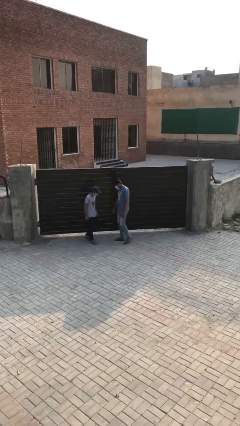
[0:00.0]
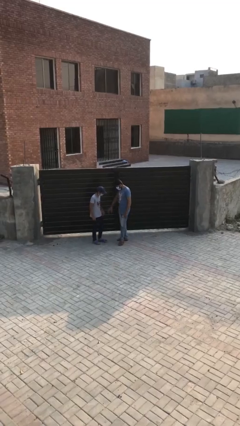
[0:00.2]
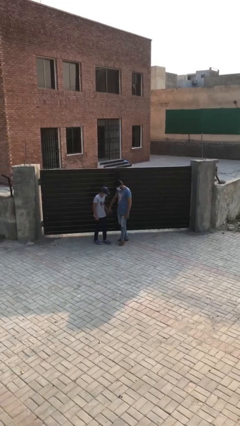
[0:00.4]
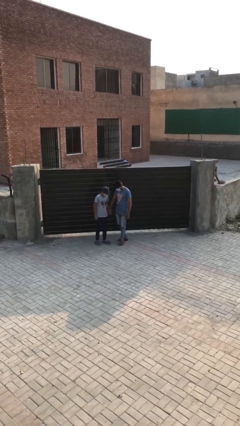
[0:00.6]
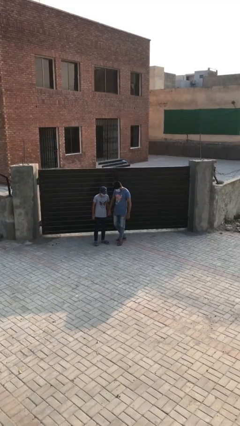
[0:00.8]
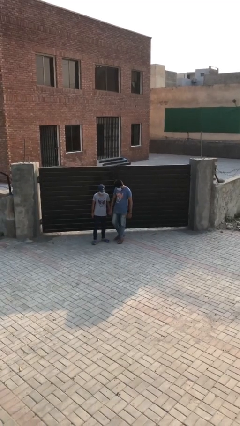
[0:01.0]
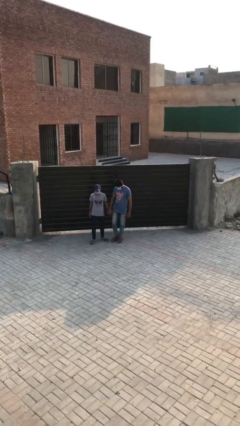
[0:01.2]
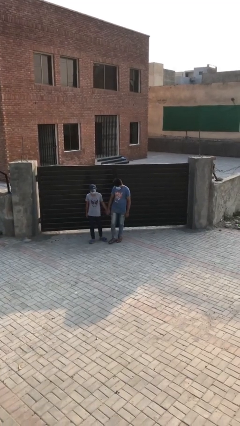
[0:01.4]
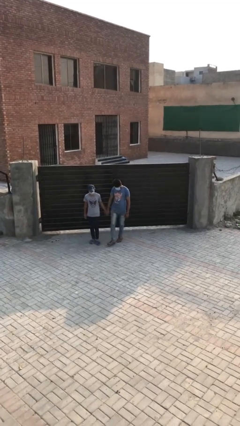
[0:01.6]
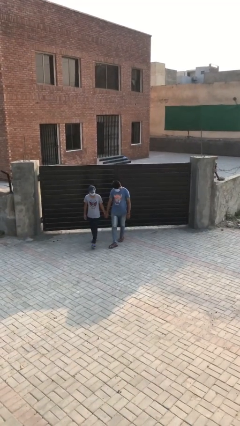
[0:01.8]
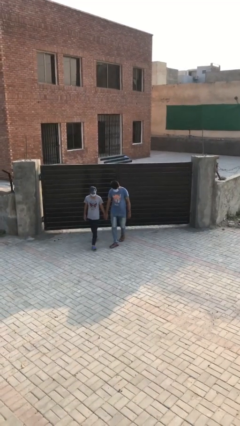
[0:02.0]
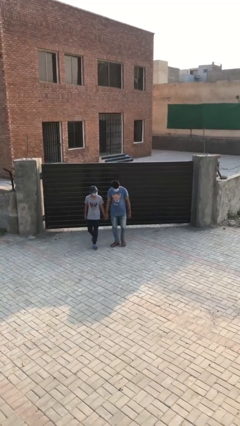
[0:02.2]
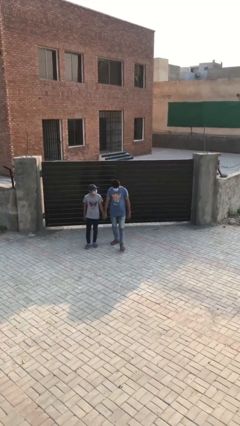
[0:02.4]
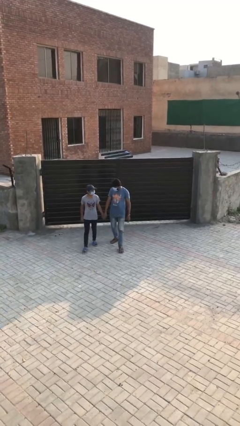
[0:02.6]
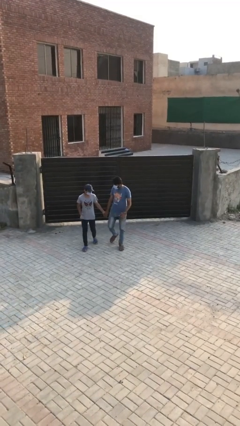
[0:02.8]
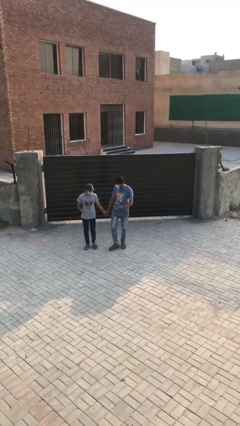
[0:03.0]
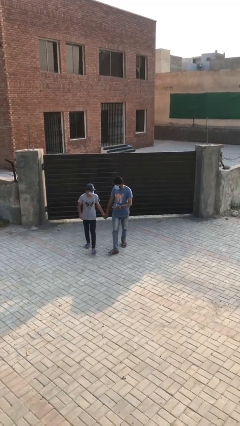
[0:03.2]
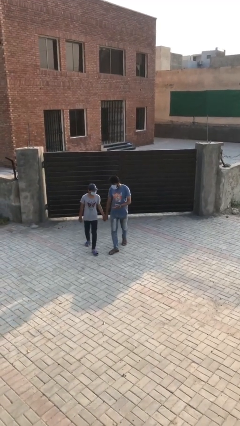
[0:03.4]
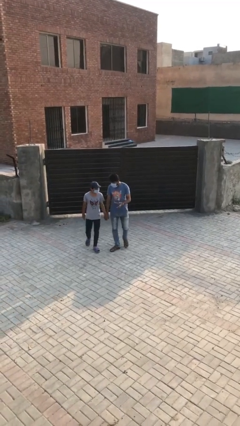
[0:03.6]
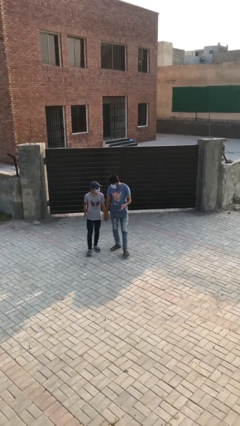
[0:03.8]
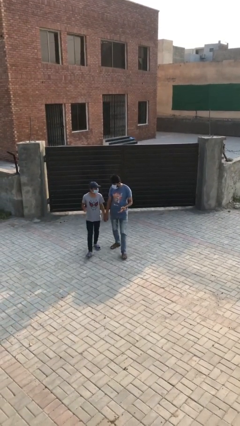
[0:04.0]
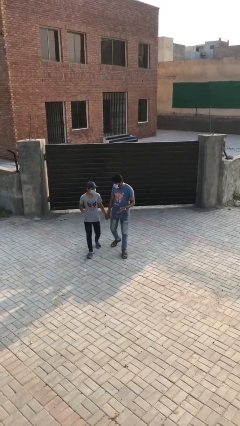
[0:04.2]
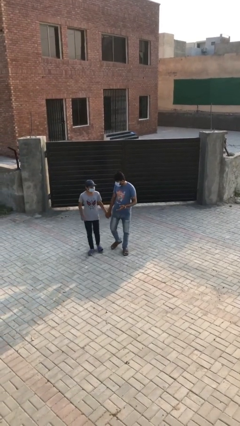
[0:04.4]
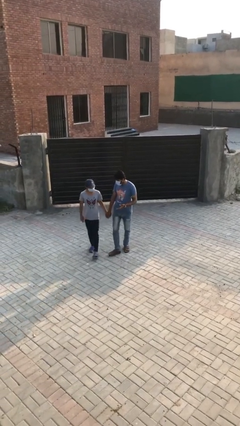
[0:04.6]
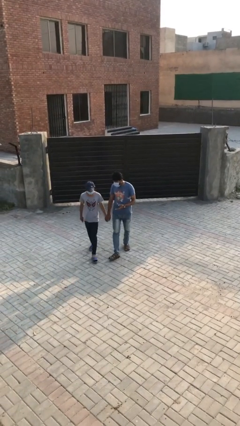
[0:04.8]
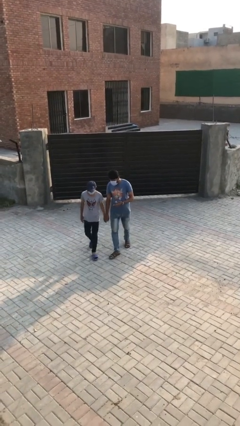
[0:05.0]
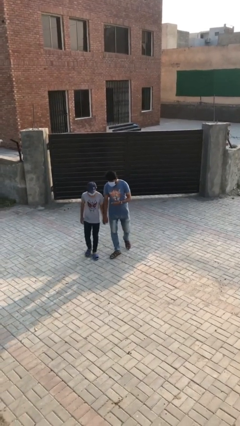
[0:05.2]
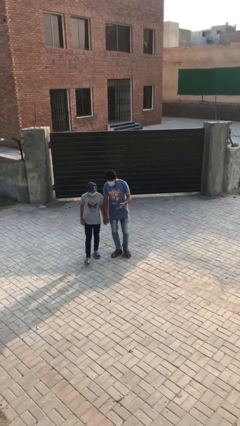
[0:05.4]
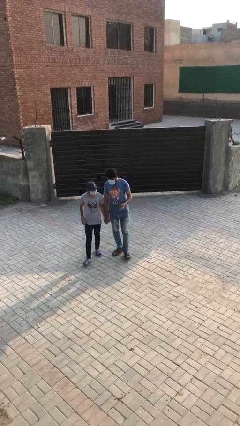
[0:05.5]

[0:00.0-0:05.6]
person holds hand

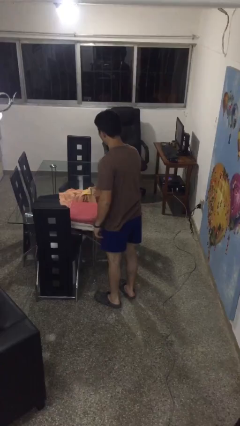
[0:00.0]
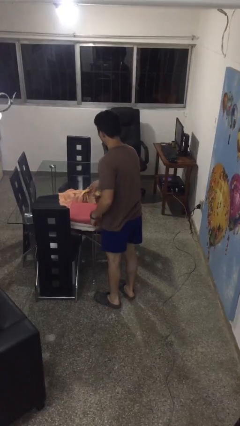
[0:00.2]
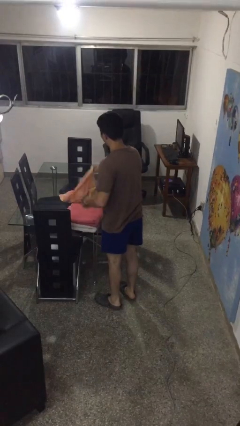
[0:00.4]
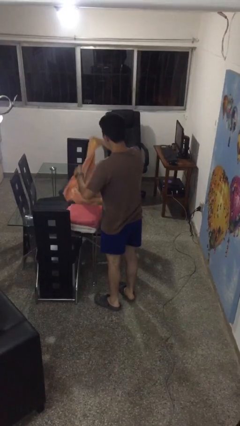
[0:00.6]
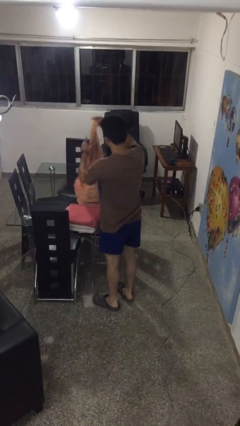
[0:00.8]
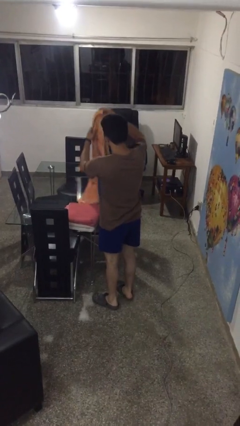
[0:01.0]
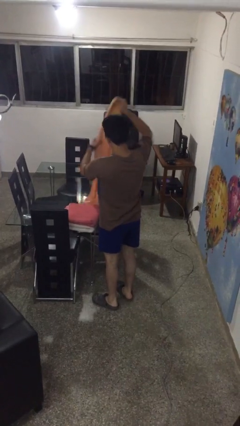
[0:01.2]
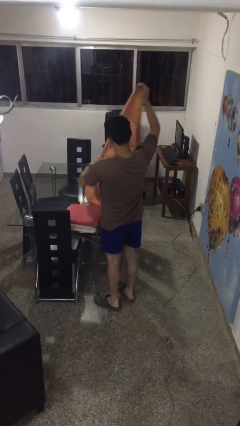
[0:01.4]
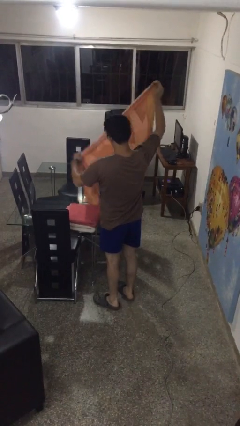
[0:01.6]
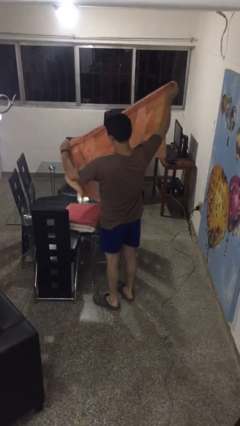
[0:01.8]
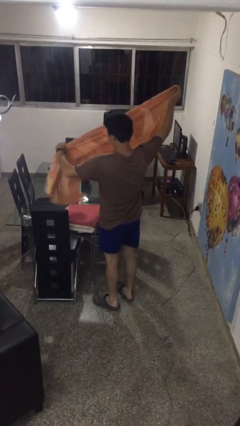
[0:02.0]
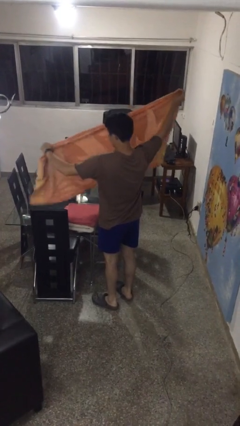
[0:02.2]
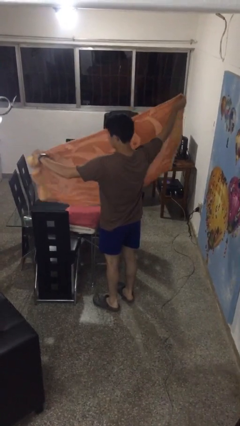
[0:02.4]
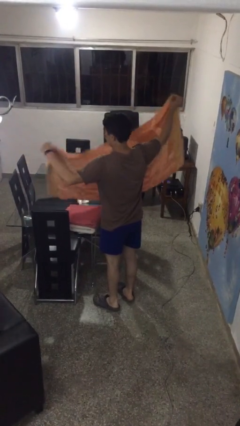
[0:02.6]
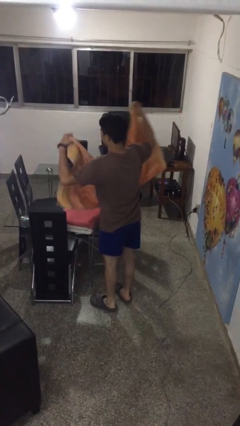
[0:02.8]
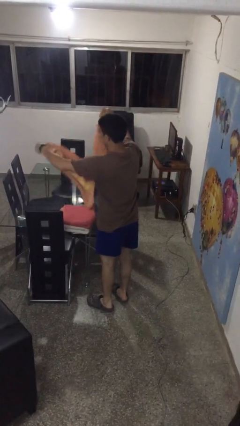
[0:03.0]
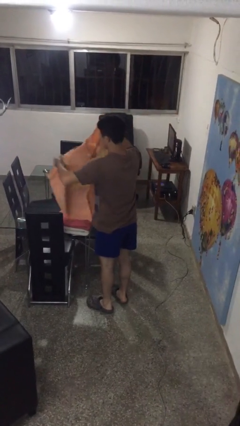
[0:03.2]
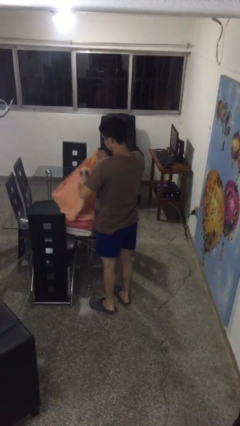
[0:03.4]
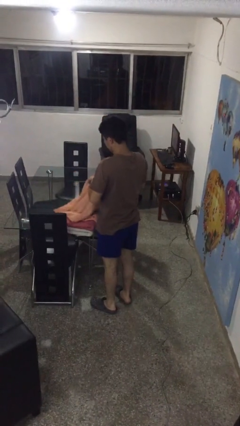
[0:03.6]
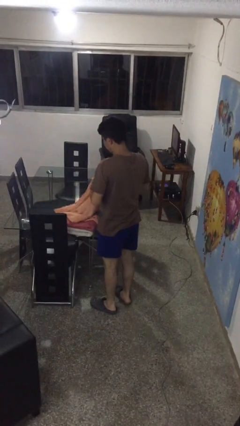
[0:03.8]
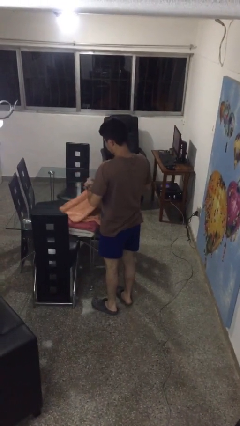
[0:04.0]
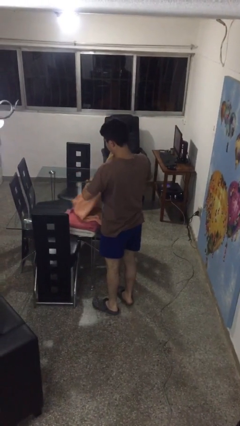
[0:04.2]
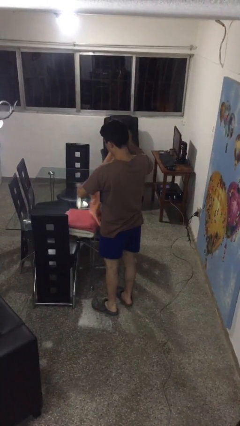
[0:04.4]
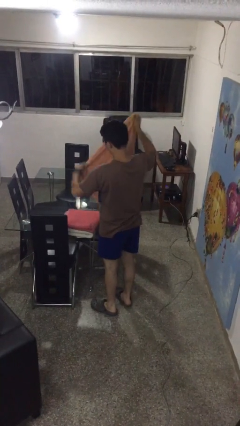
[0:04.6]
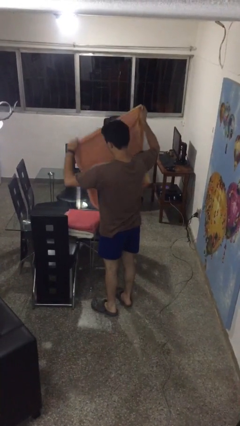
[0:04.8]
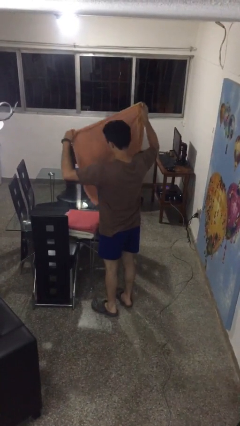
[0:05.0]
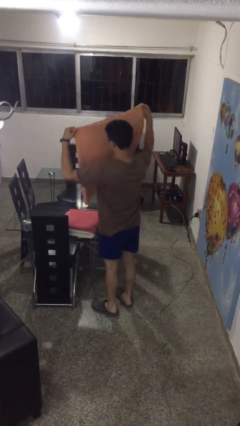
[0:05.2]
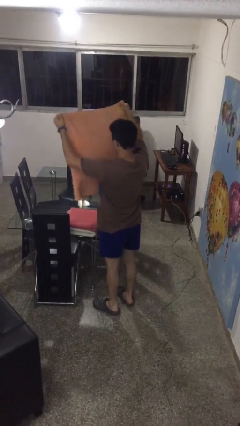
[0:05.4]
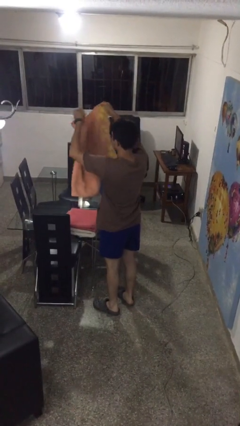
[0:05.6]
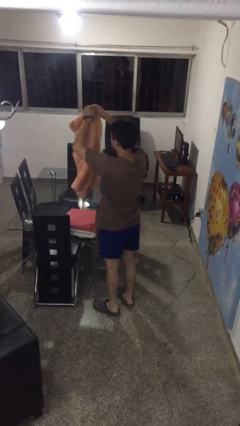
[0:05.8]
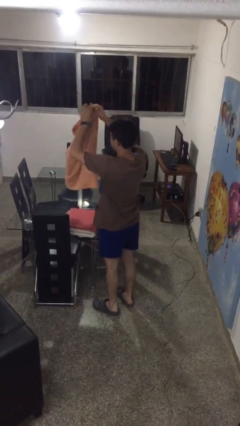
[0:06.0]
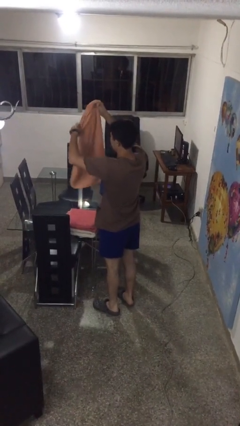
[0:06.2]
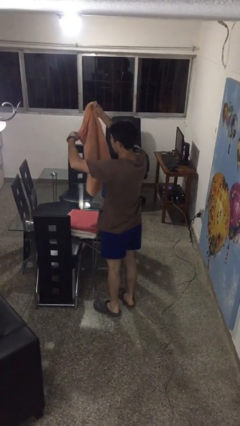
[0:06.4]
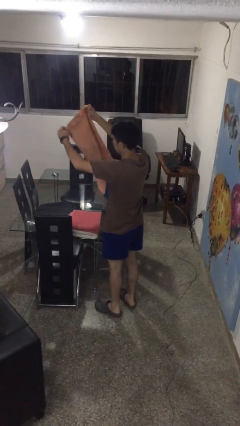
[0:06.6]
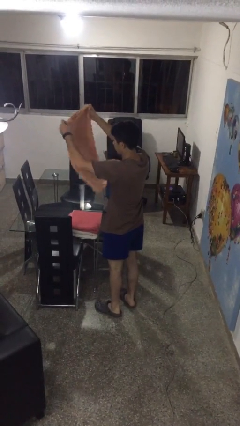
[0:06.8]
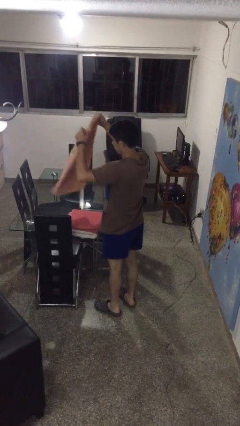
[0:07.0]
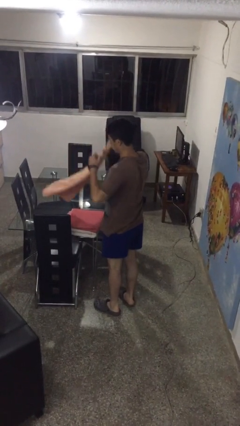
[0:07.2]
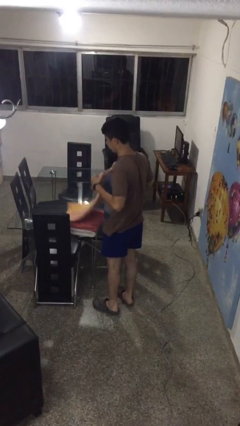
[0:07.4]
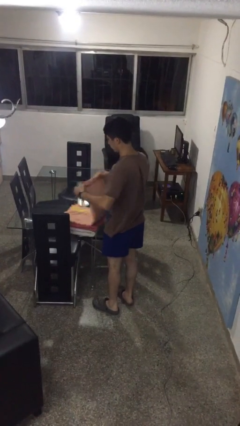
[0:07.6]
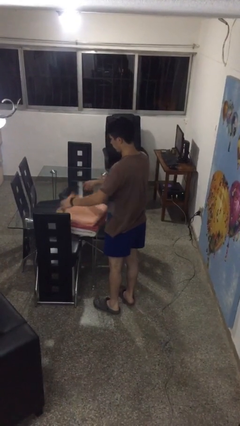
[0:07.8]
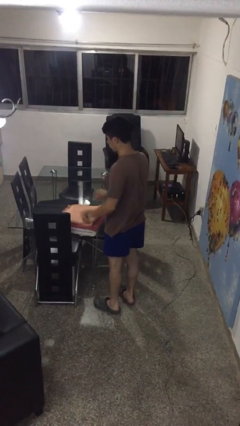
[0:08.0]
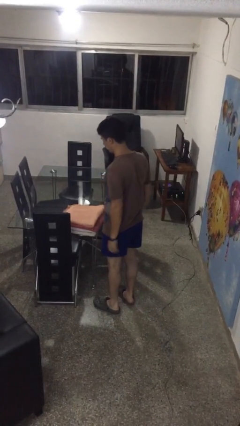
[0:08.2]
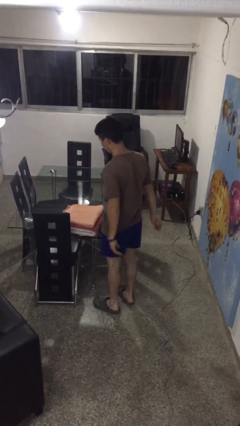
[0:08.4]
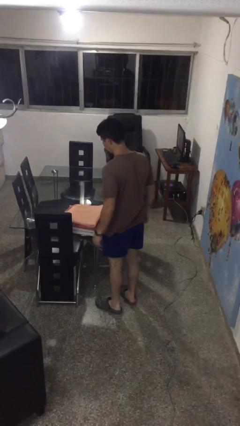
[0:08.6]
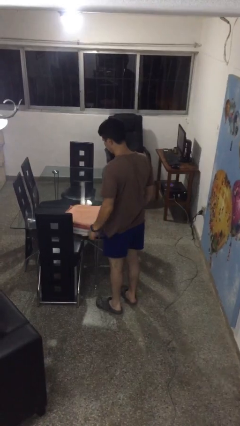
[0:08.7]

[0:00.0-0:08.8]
person folds towel

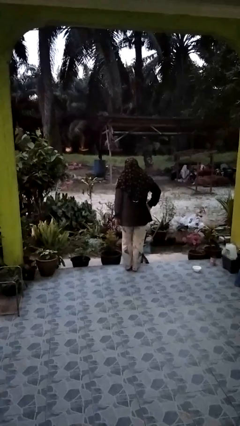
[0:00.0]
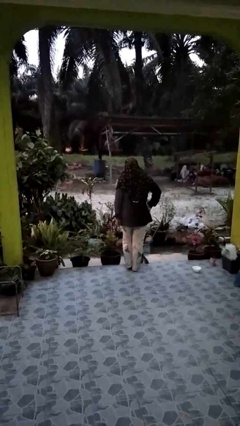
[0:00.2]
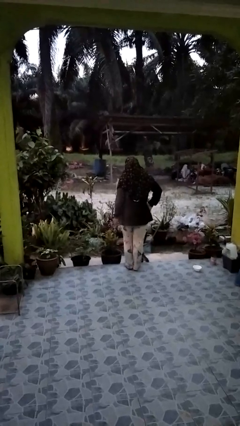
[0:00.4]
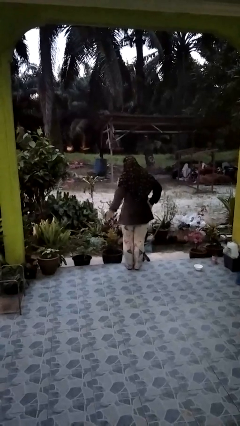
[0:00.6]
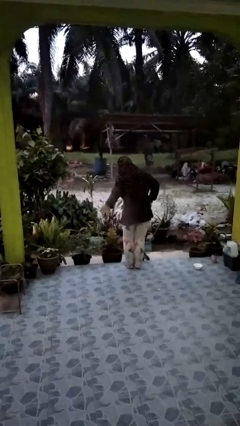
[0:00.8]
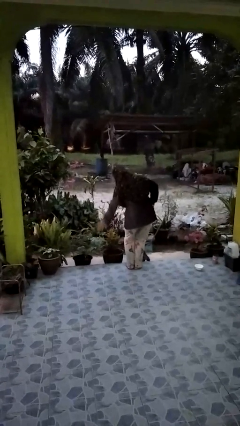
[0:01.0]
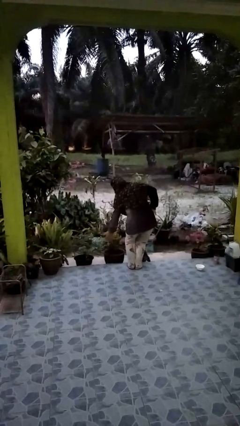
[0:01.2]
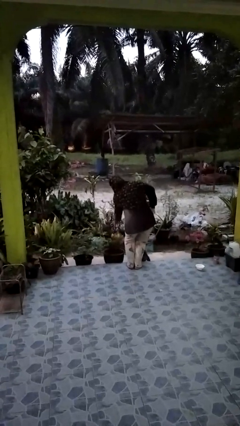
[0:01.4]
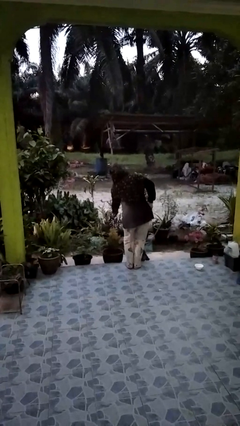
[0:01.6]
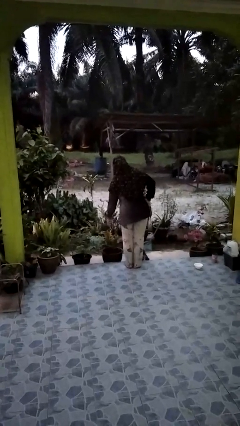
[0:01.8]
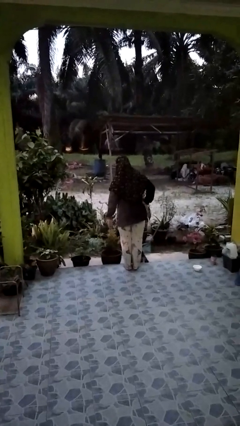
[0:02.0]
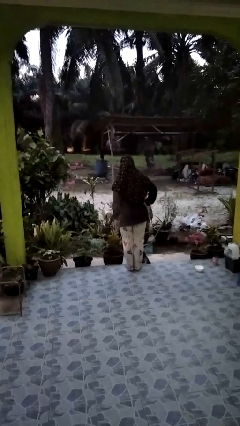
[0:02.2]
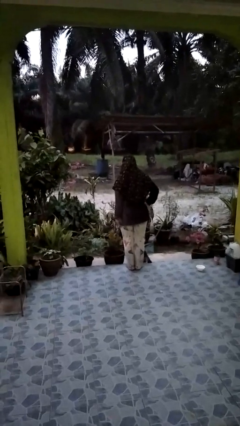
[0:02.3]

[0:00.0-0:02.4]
person waves hand over object

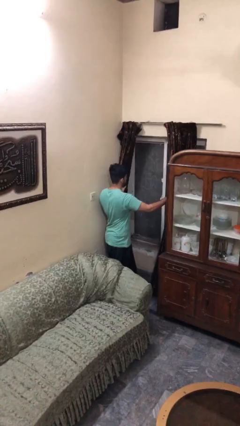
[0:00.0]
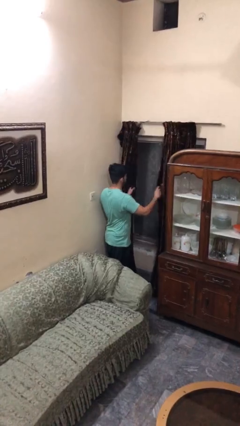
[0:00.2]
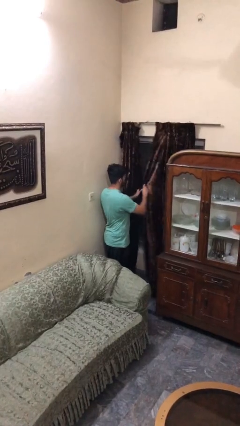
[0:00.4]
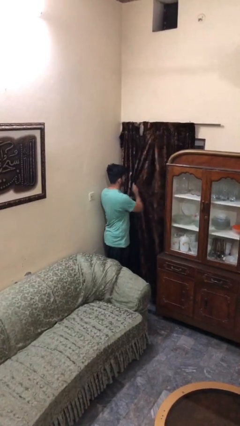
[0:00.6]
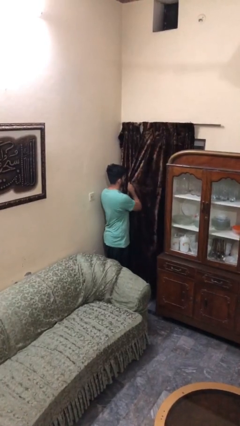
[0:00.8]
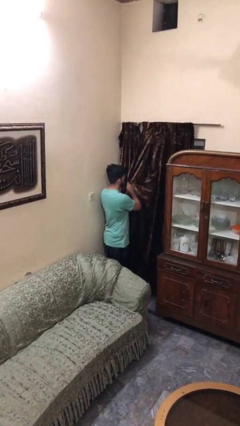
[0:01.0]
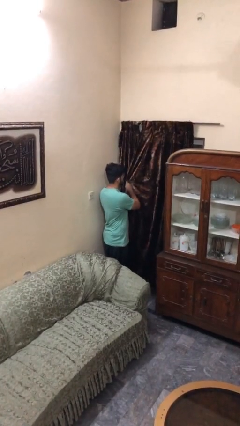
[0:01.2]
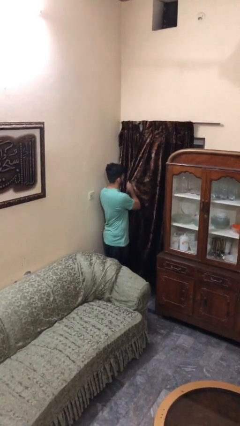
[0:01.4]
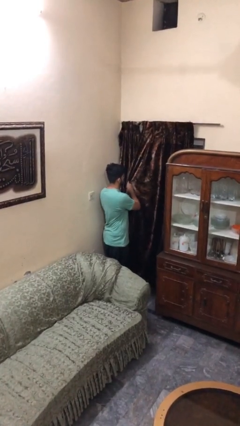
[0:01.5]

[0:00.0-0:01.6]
person closes curtains
